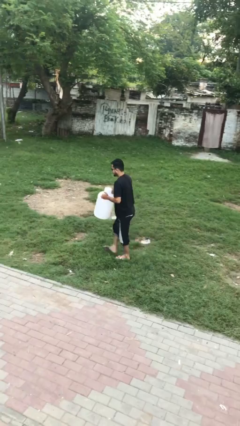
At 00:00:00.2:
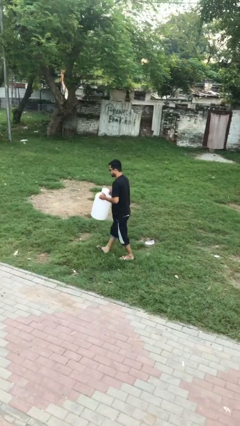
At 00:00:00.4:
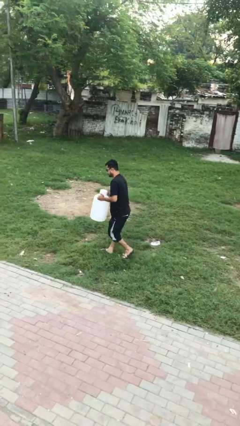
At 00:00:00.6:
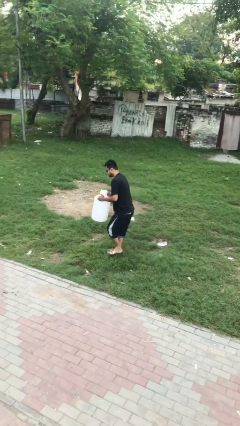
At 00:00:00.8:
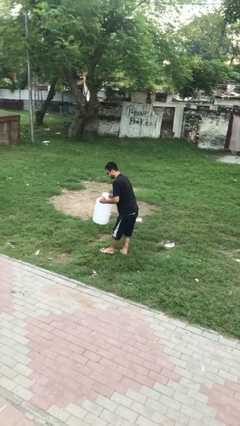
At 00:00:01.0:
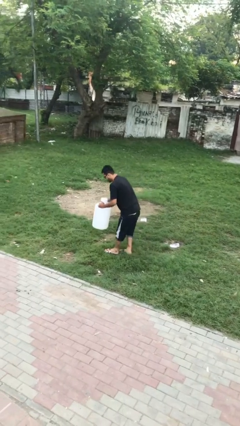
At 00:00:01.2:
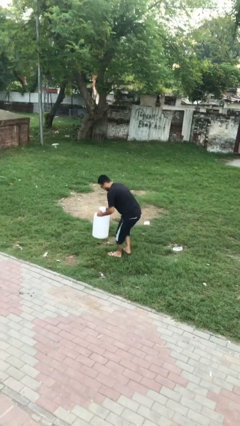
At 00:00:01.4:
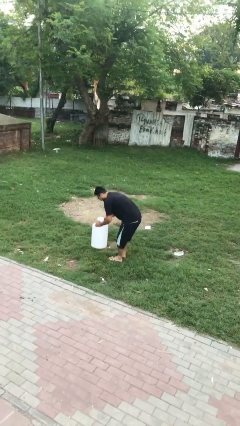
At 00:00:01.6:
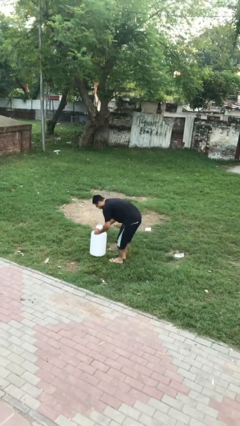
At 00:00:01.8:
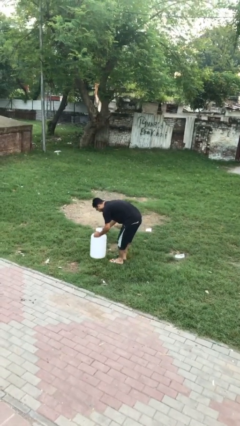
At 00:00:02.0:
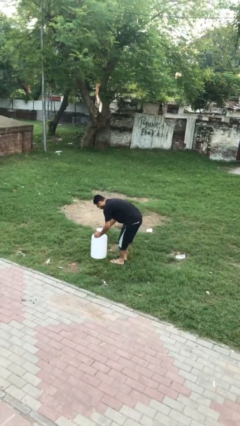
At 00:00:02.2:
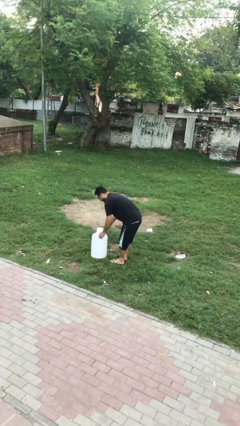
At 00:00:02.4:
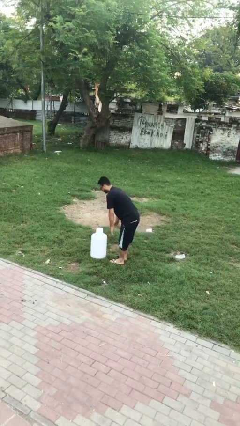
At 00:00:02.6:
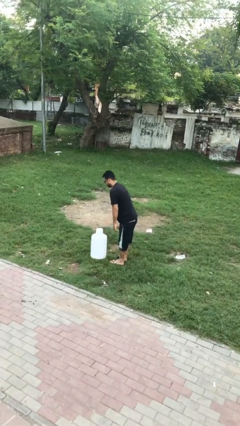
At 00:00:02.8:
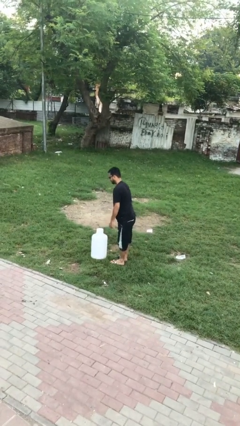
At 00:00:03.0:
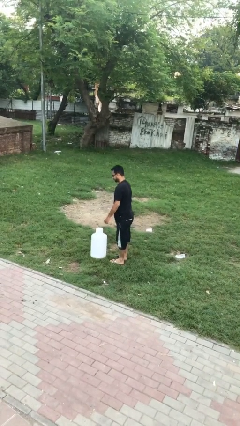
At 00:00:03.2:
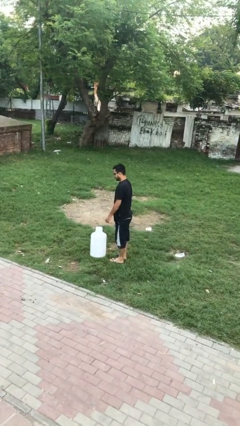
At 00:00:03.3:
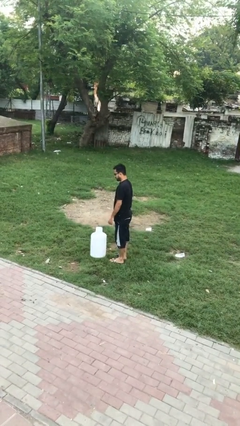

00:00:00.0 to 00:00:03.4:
person puts down object on floor

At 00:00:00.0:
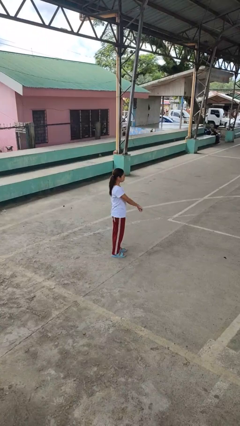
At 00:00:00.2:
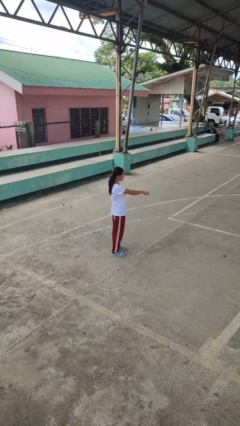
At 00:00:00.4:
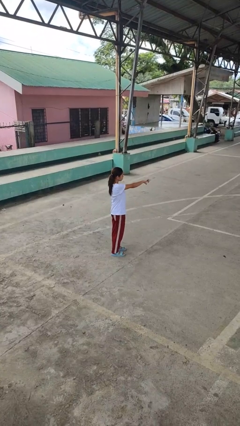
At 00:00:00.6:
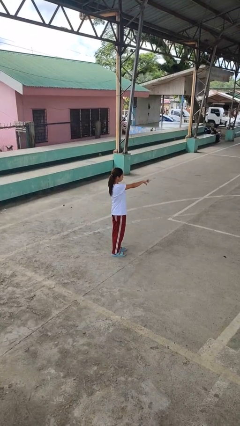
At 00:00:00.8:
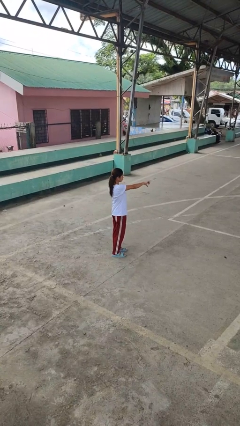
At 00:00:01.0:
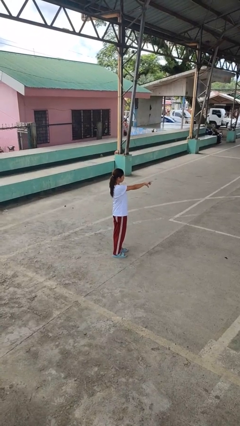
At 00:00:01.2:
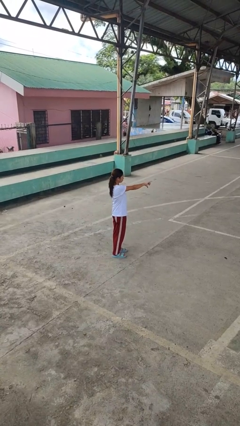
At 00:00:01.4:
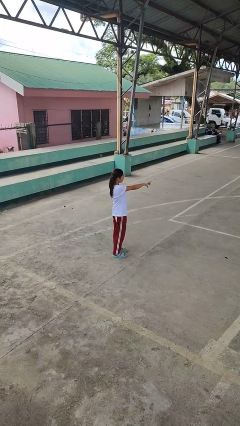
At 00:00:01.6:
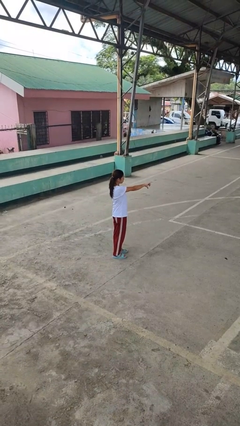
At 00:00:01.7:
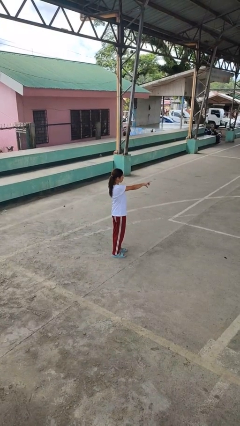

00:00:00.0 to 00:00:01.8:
person gestures thumbs down

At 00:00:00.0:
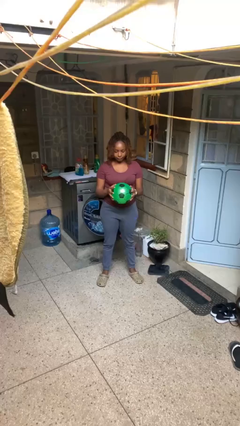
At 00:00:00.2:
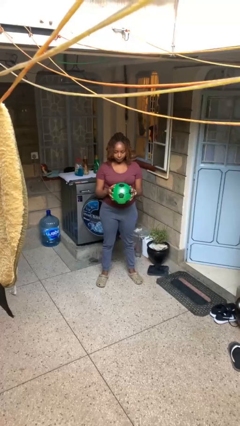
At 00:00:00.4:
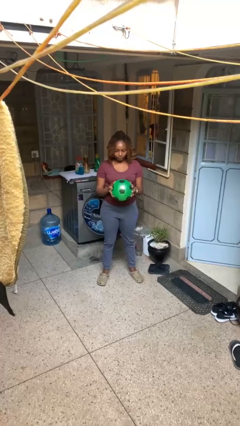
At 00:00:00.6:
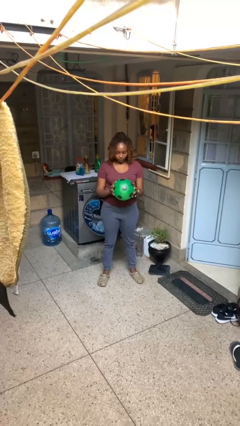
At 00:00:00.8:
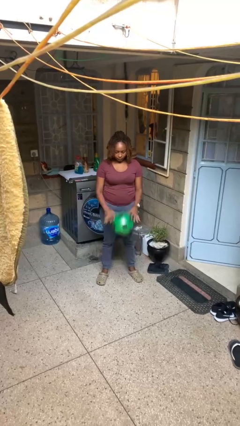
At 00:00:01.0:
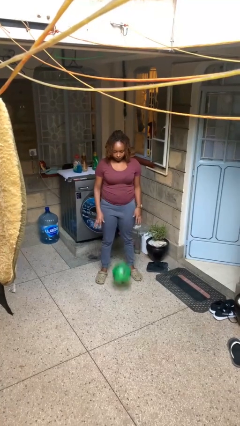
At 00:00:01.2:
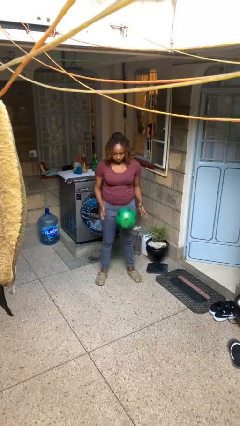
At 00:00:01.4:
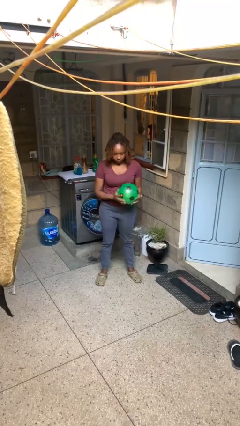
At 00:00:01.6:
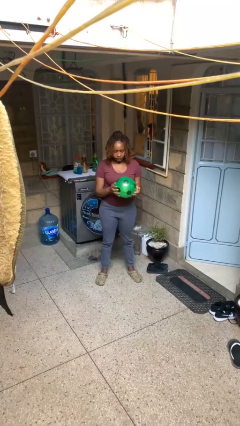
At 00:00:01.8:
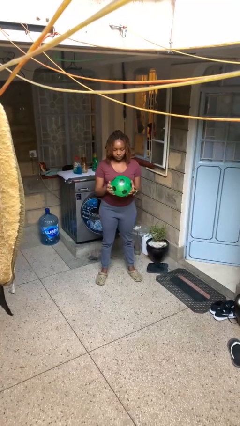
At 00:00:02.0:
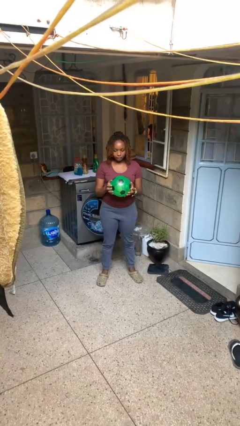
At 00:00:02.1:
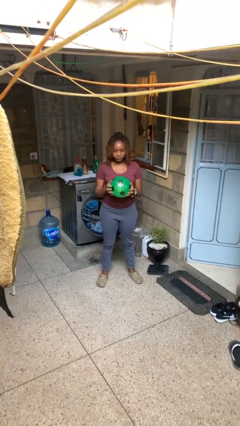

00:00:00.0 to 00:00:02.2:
person bounces ball on floor

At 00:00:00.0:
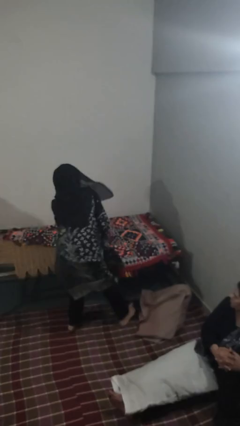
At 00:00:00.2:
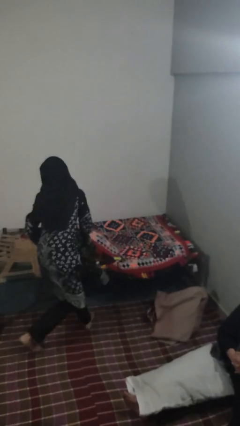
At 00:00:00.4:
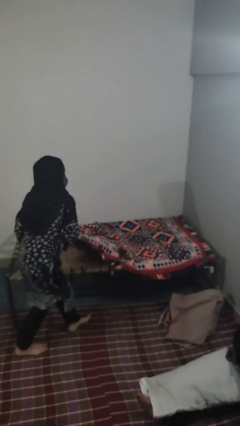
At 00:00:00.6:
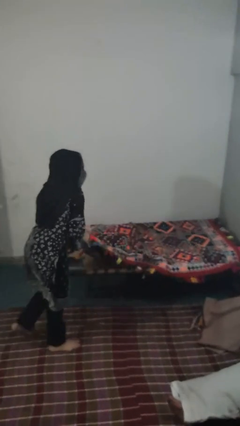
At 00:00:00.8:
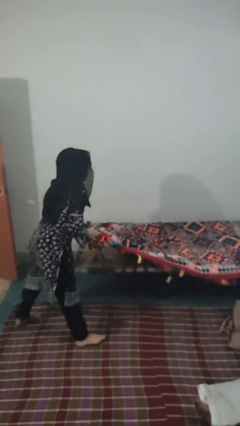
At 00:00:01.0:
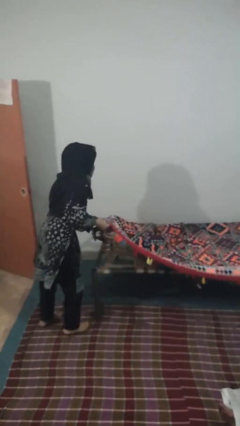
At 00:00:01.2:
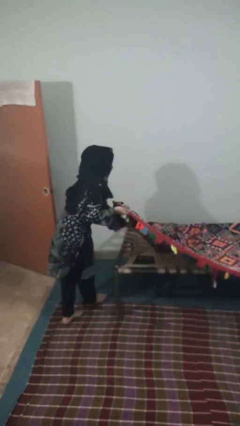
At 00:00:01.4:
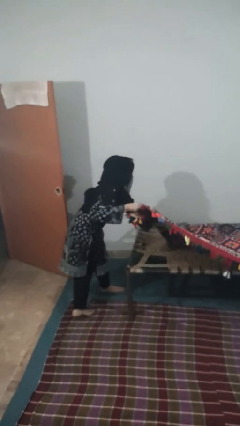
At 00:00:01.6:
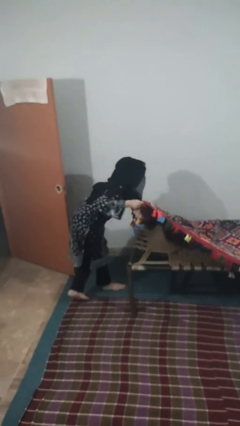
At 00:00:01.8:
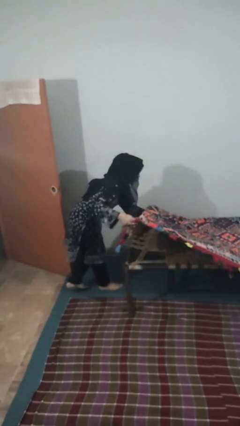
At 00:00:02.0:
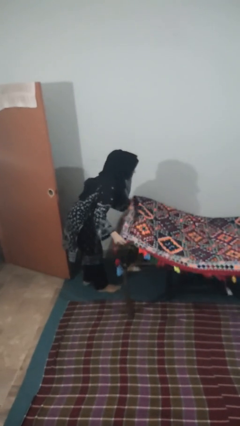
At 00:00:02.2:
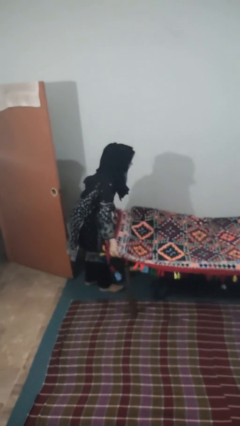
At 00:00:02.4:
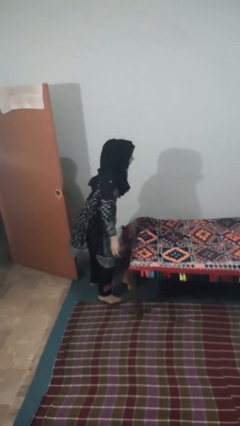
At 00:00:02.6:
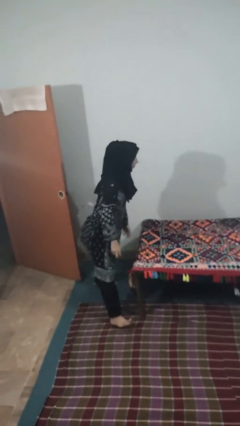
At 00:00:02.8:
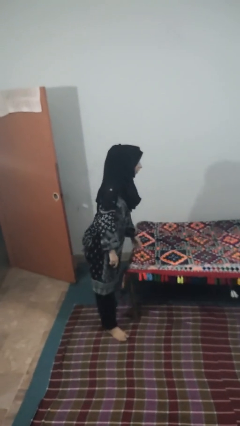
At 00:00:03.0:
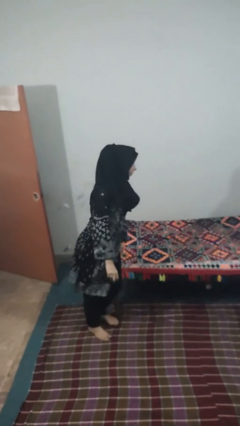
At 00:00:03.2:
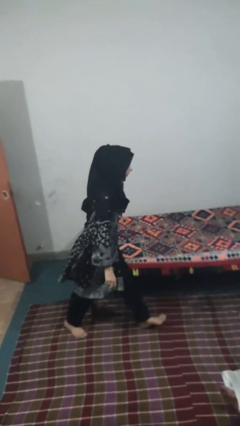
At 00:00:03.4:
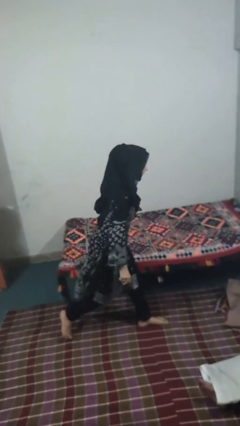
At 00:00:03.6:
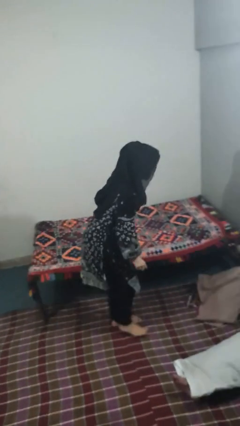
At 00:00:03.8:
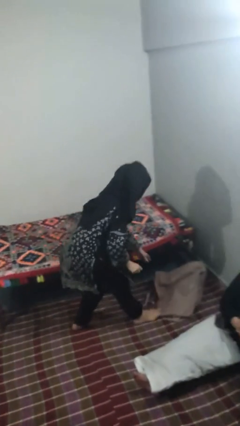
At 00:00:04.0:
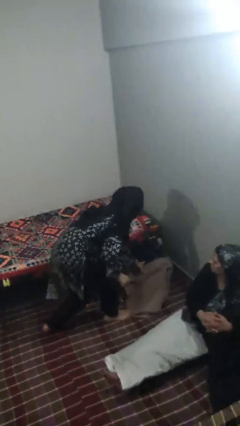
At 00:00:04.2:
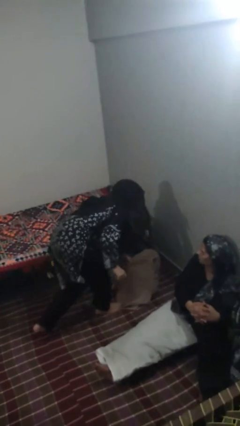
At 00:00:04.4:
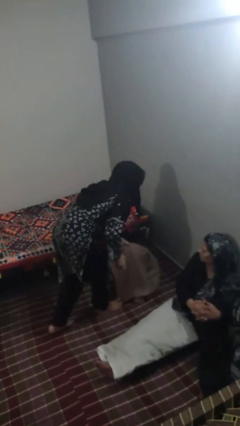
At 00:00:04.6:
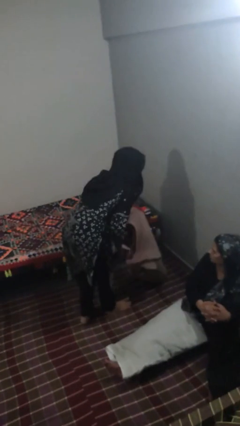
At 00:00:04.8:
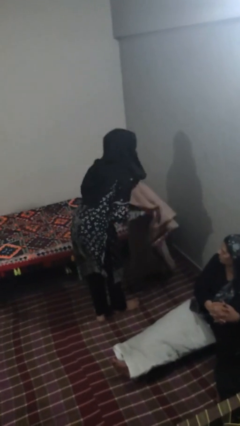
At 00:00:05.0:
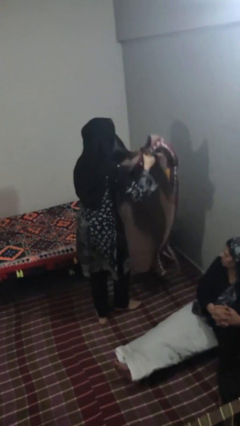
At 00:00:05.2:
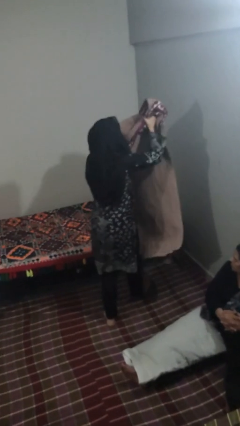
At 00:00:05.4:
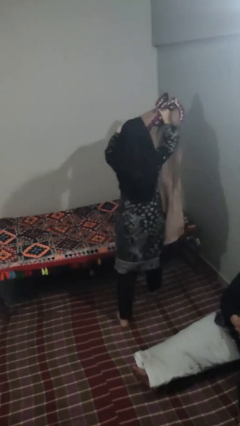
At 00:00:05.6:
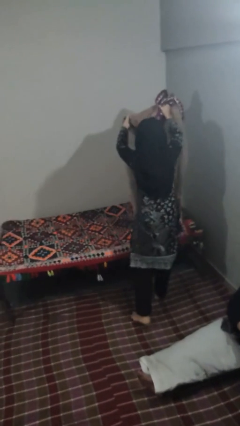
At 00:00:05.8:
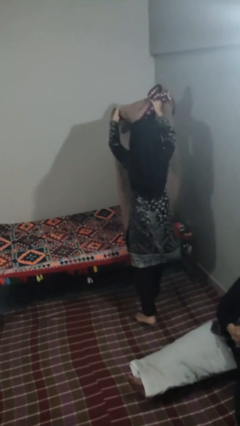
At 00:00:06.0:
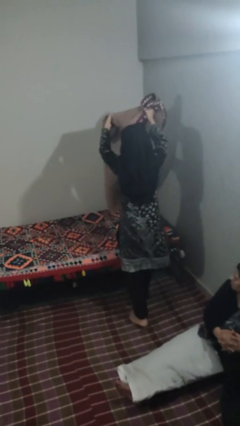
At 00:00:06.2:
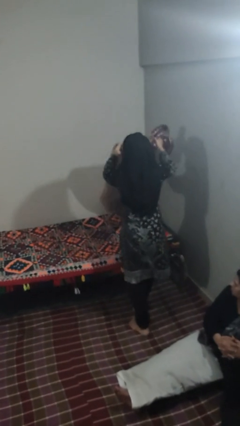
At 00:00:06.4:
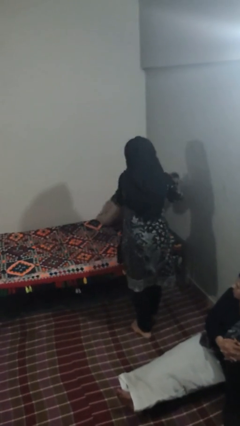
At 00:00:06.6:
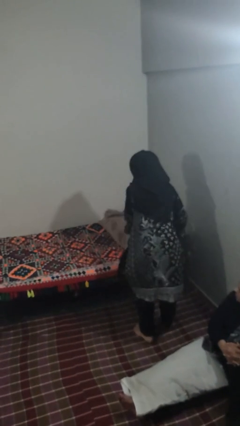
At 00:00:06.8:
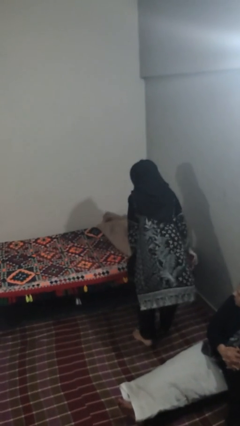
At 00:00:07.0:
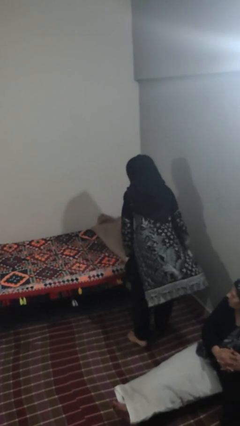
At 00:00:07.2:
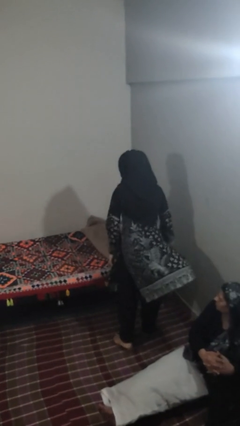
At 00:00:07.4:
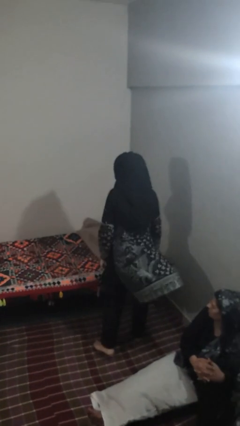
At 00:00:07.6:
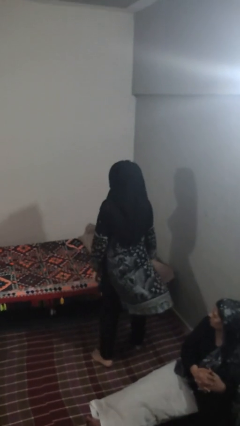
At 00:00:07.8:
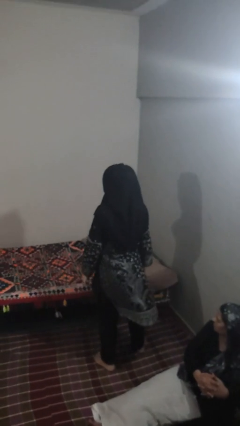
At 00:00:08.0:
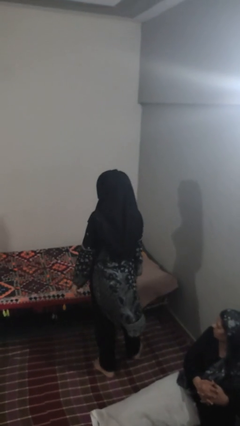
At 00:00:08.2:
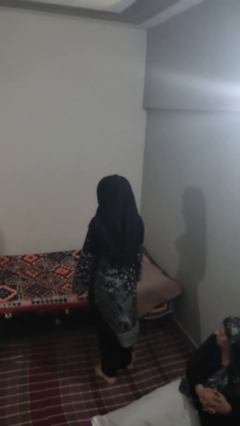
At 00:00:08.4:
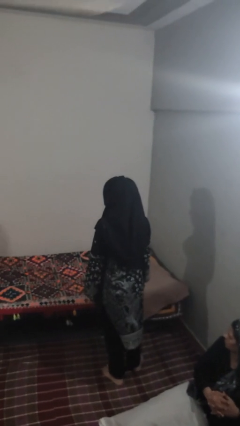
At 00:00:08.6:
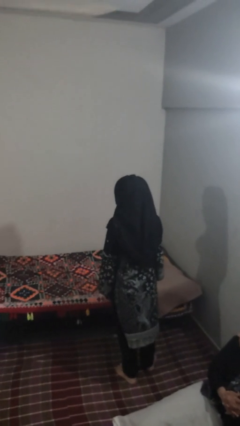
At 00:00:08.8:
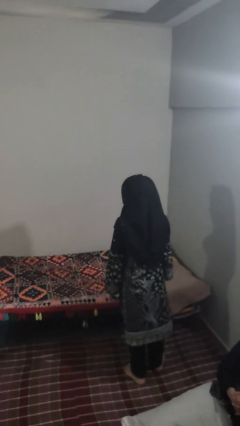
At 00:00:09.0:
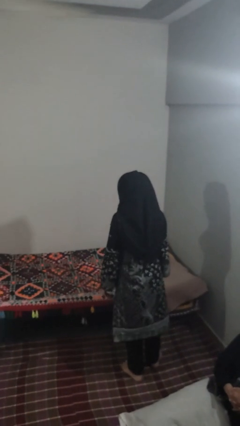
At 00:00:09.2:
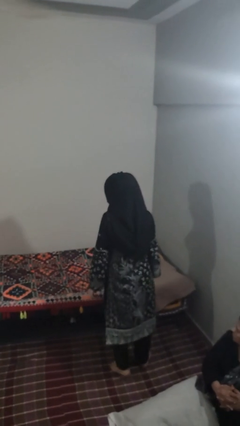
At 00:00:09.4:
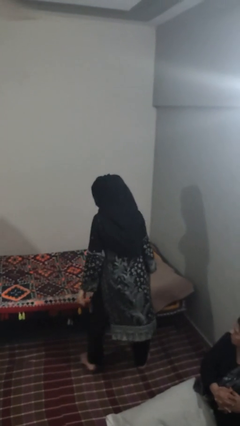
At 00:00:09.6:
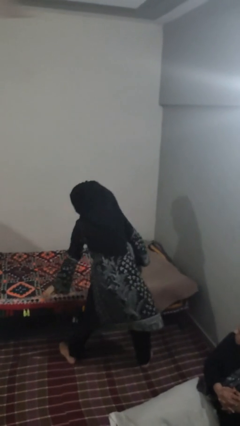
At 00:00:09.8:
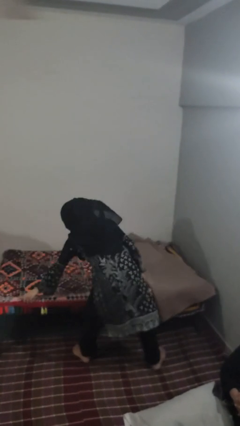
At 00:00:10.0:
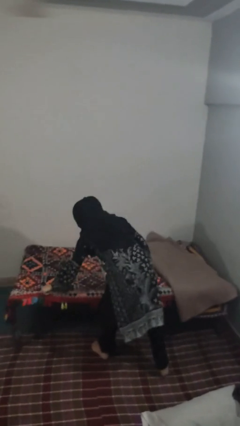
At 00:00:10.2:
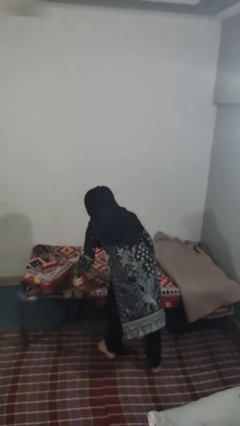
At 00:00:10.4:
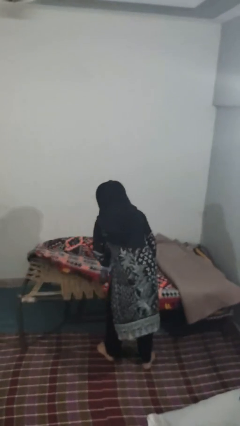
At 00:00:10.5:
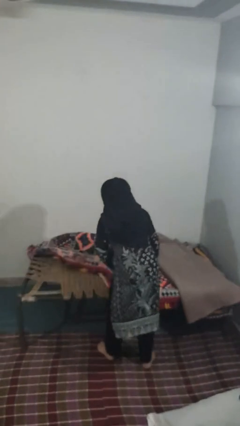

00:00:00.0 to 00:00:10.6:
person makes bed
